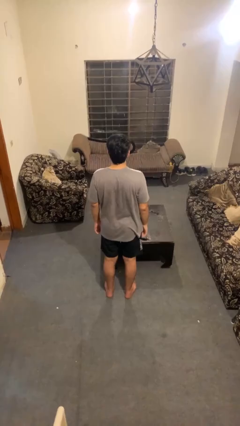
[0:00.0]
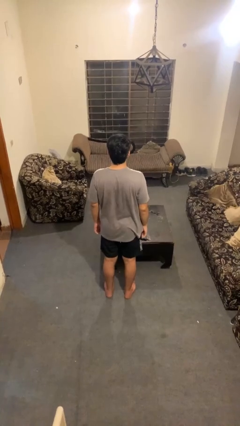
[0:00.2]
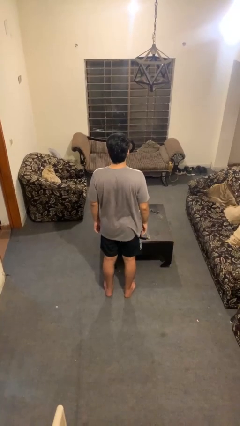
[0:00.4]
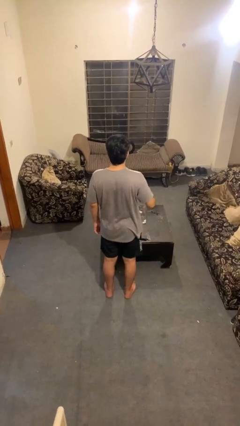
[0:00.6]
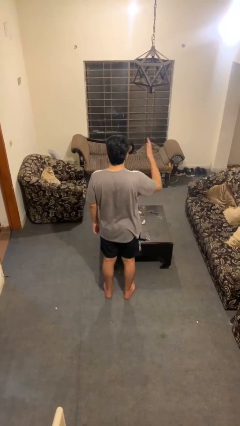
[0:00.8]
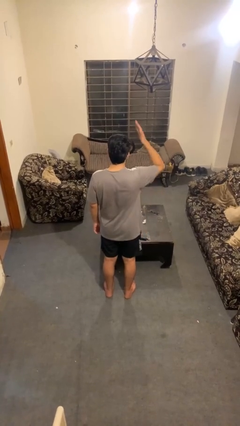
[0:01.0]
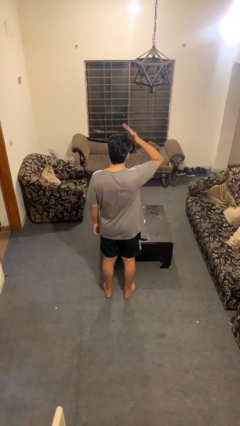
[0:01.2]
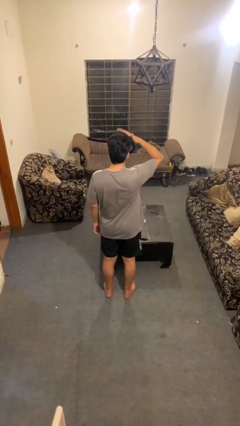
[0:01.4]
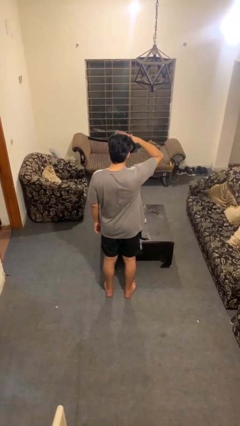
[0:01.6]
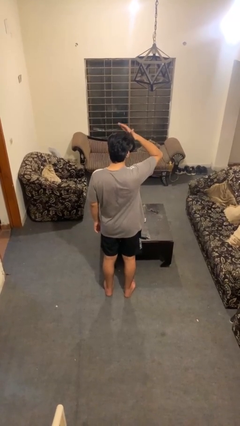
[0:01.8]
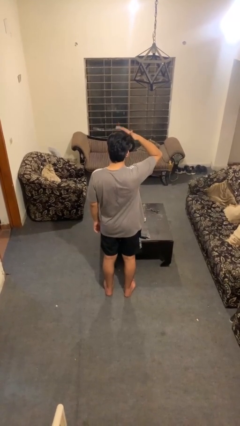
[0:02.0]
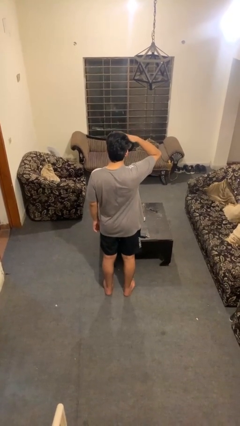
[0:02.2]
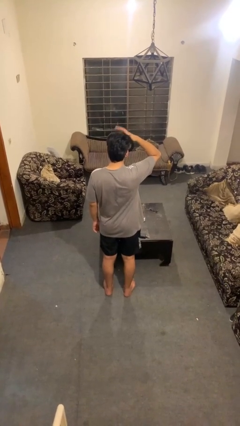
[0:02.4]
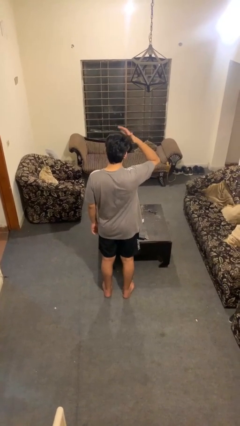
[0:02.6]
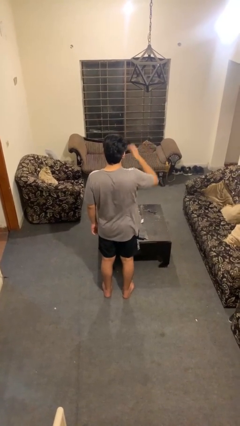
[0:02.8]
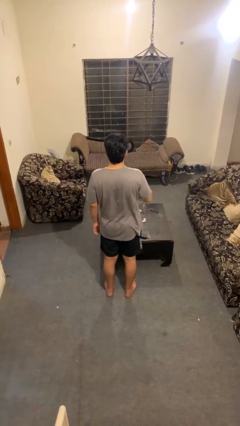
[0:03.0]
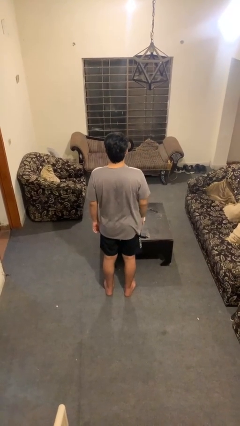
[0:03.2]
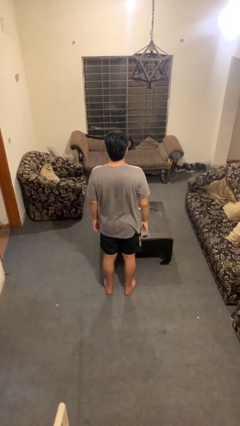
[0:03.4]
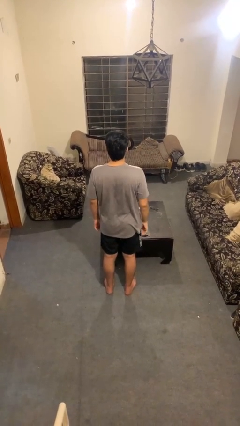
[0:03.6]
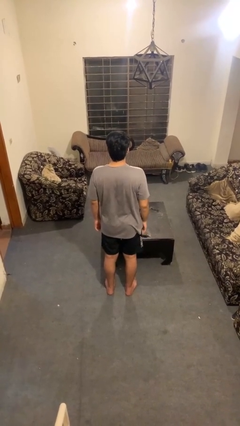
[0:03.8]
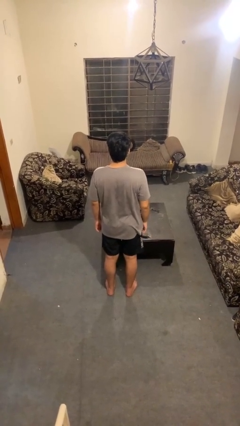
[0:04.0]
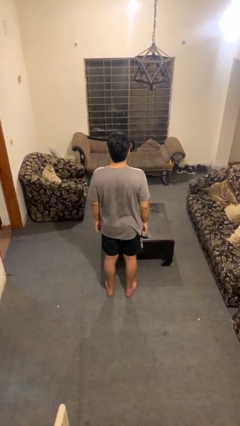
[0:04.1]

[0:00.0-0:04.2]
person pats head

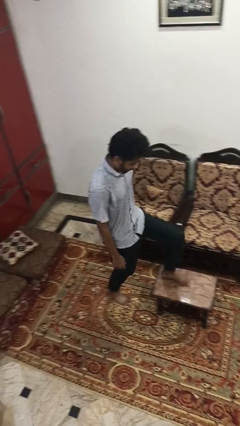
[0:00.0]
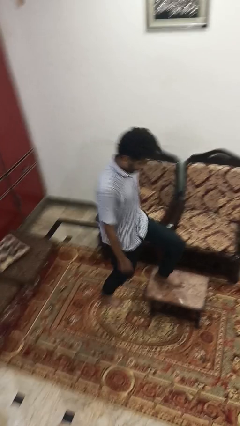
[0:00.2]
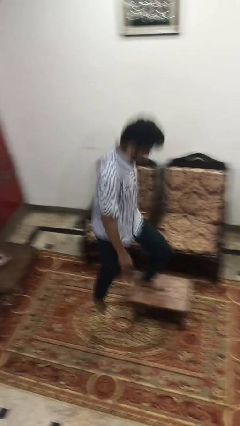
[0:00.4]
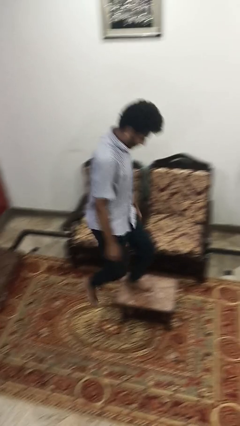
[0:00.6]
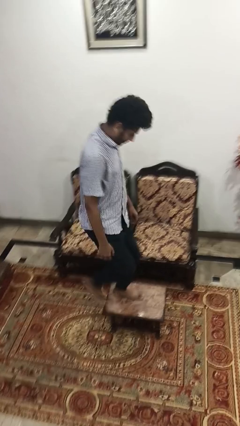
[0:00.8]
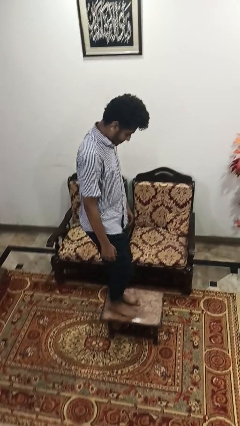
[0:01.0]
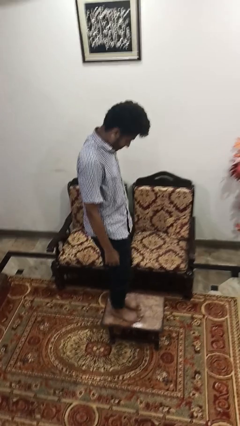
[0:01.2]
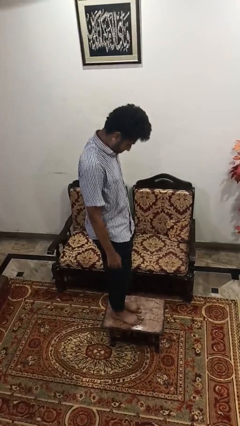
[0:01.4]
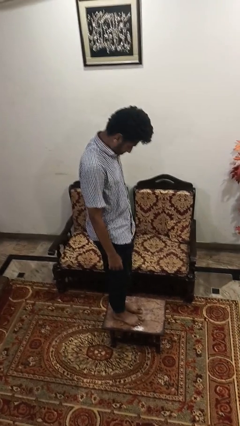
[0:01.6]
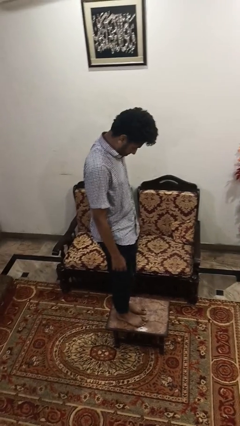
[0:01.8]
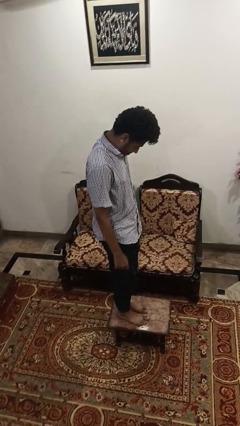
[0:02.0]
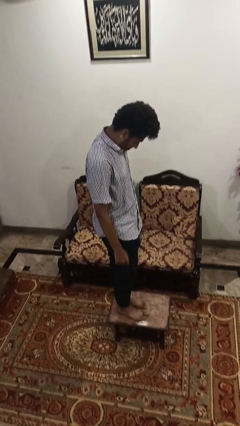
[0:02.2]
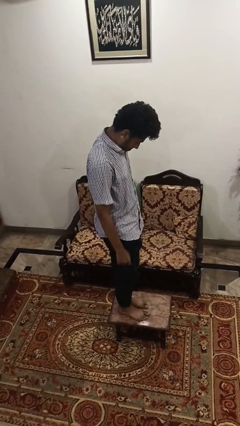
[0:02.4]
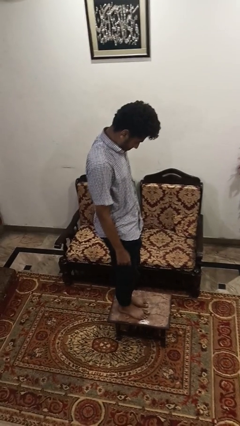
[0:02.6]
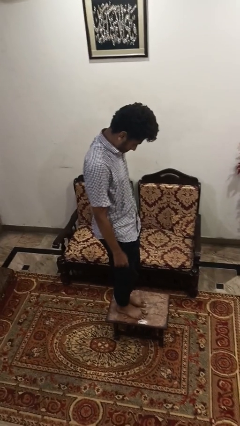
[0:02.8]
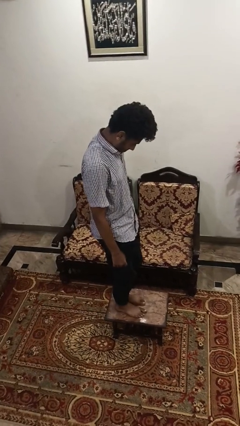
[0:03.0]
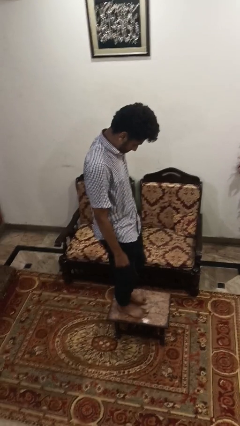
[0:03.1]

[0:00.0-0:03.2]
person climbs on table

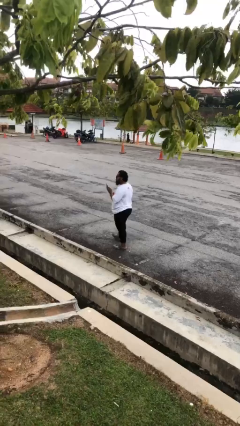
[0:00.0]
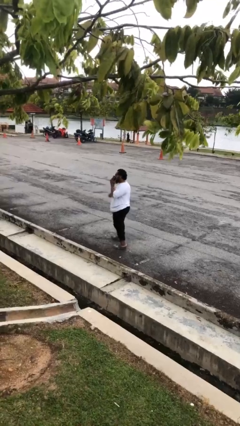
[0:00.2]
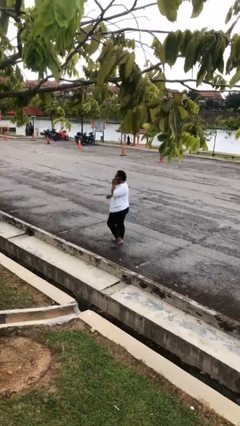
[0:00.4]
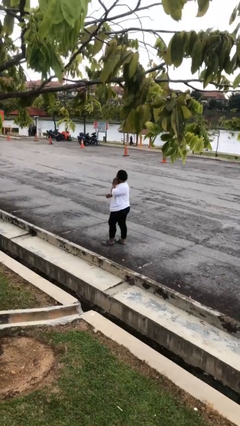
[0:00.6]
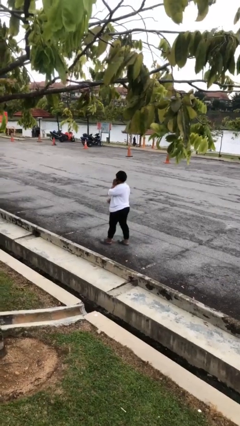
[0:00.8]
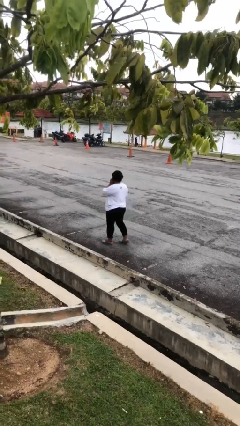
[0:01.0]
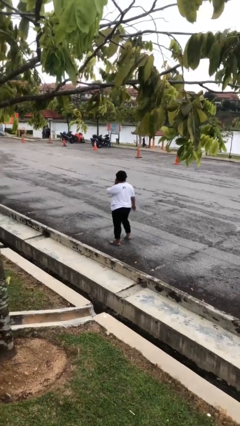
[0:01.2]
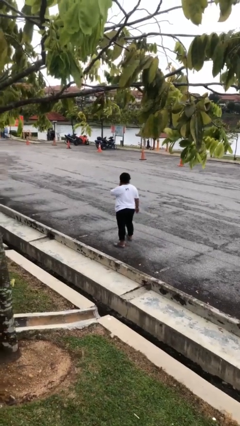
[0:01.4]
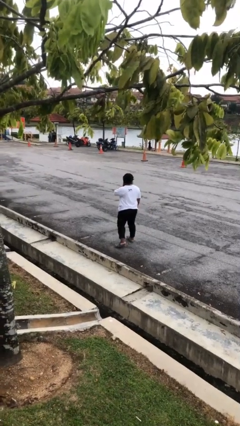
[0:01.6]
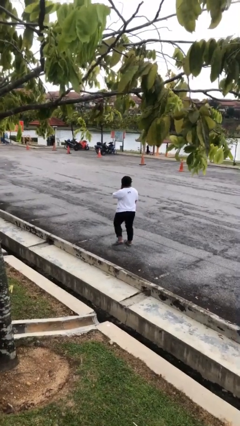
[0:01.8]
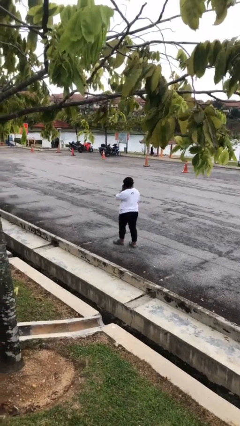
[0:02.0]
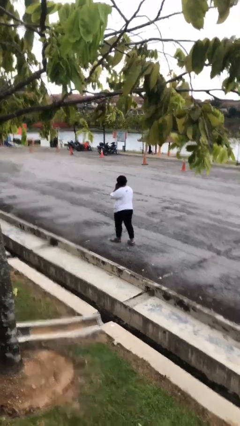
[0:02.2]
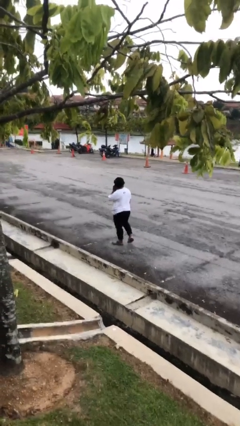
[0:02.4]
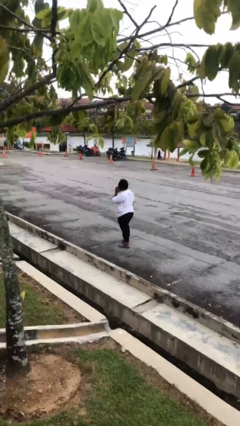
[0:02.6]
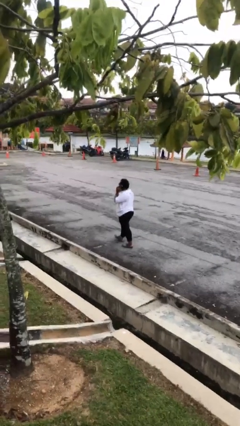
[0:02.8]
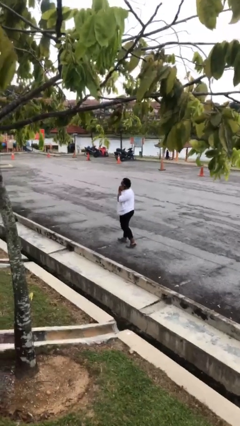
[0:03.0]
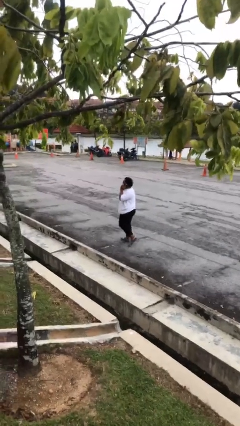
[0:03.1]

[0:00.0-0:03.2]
person talks on phone

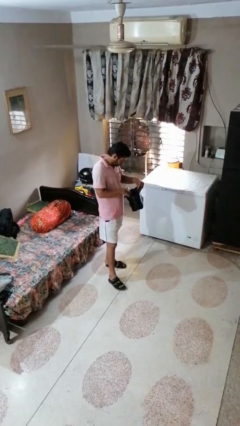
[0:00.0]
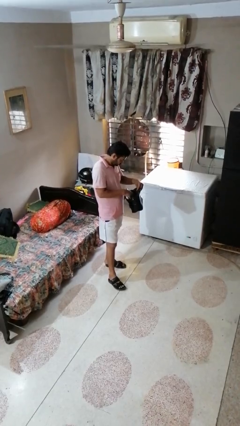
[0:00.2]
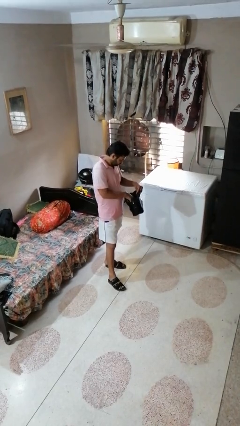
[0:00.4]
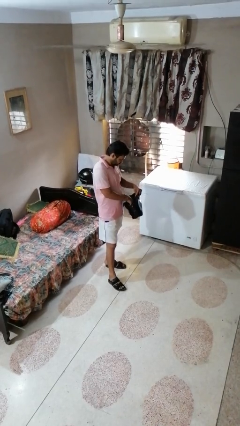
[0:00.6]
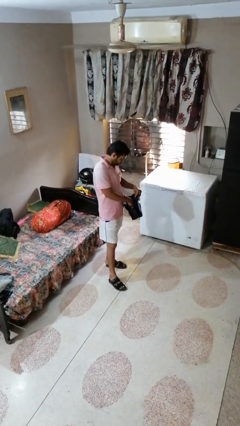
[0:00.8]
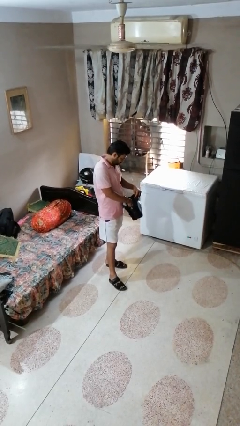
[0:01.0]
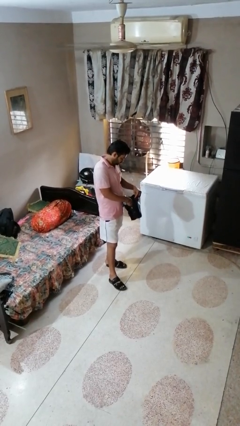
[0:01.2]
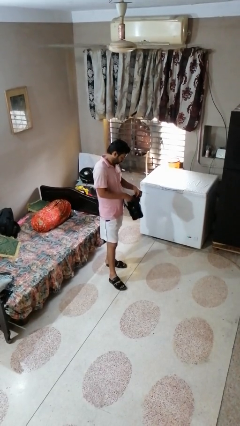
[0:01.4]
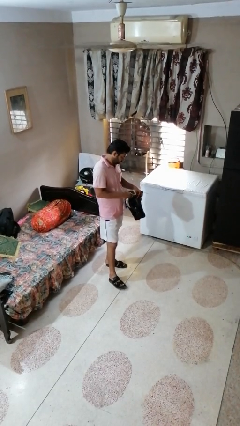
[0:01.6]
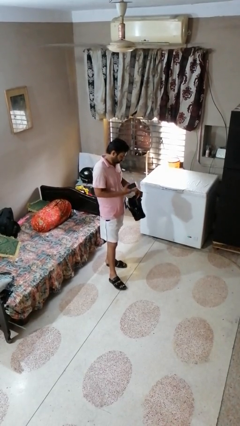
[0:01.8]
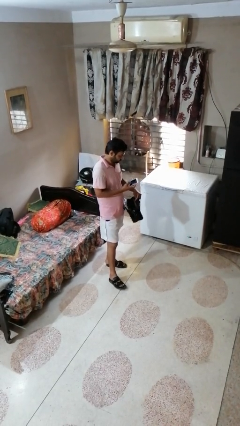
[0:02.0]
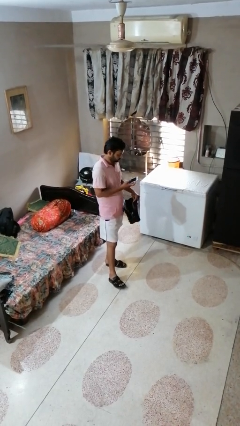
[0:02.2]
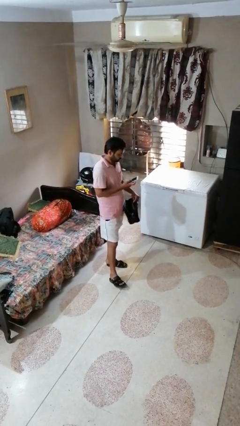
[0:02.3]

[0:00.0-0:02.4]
person takes object from purse

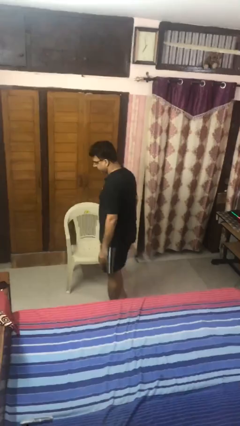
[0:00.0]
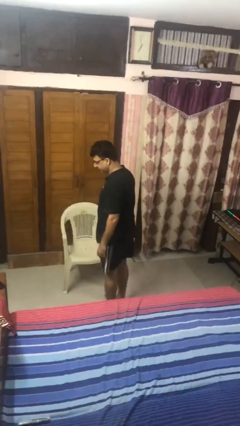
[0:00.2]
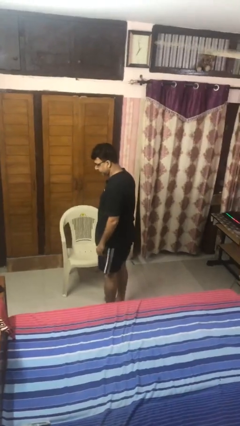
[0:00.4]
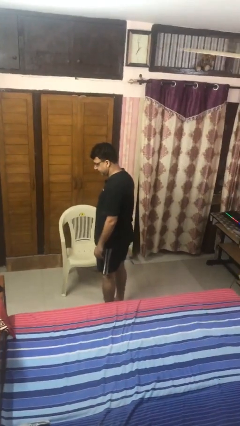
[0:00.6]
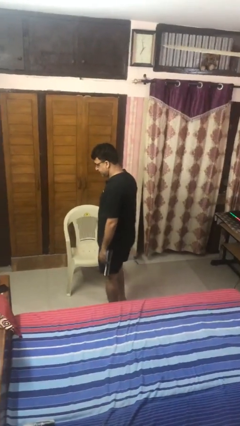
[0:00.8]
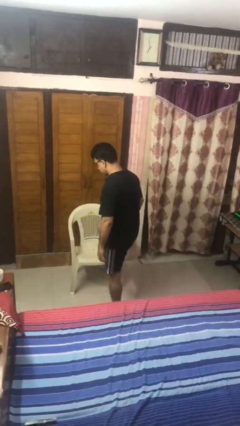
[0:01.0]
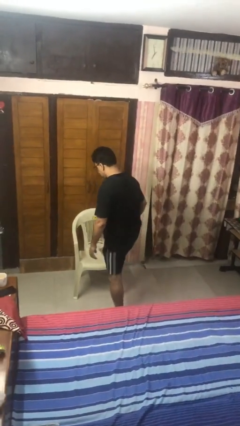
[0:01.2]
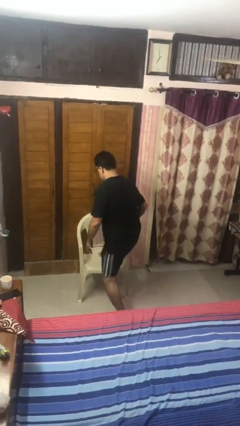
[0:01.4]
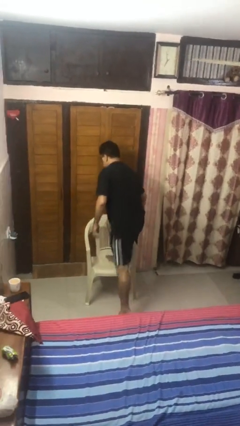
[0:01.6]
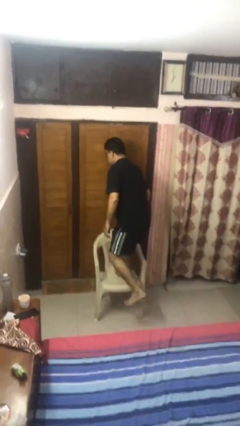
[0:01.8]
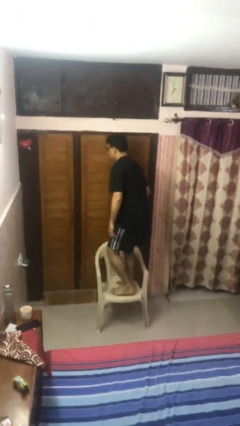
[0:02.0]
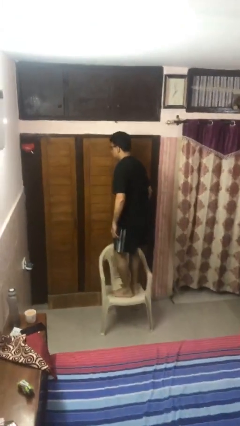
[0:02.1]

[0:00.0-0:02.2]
person climbs on chair

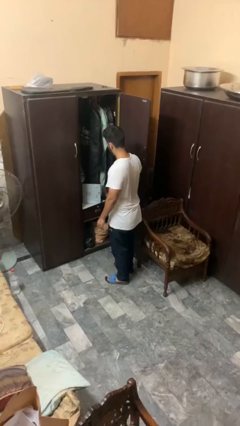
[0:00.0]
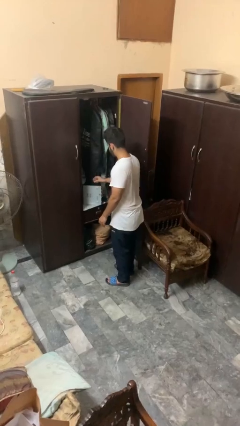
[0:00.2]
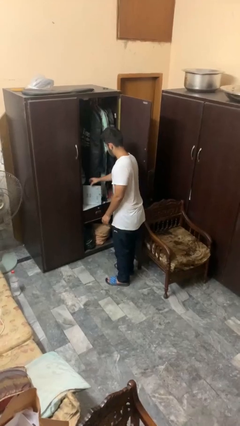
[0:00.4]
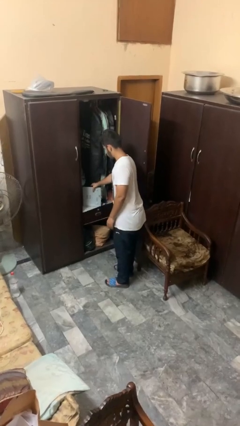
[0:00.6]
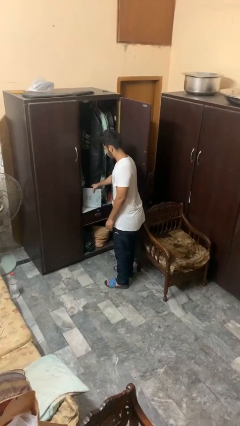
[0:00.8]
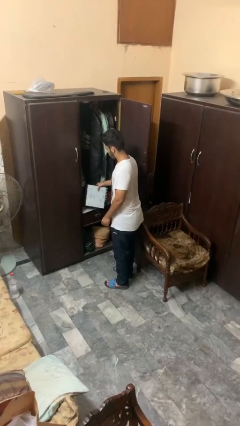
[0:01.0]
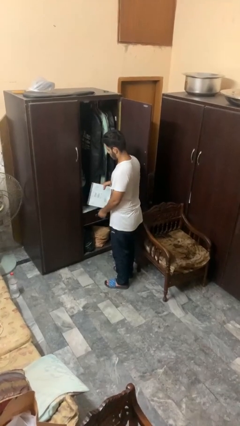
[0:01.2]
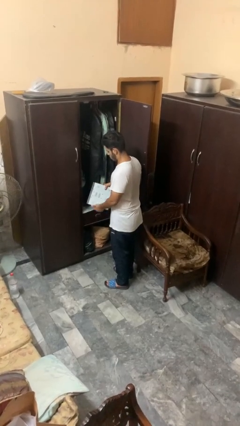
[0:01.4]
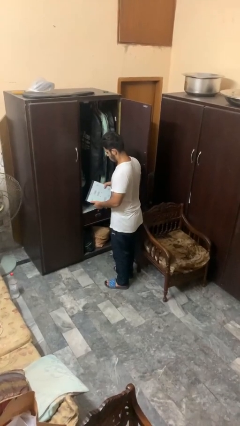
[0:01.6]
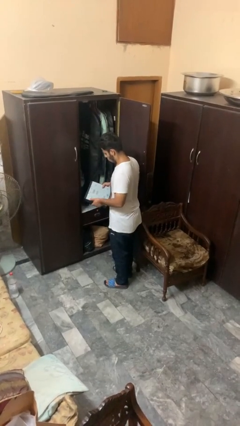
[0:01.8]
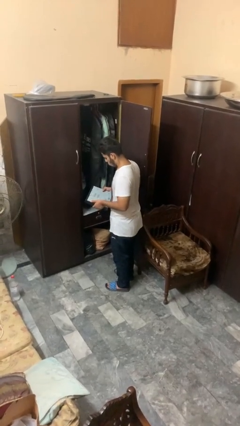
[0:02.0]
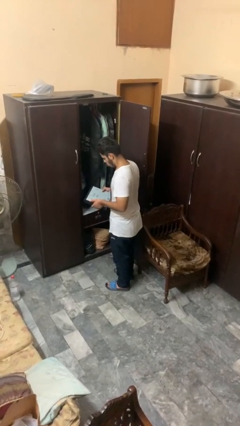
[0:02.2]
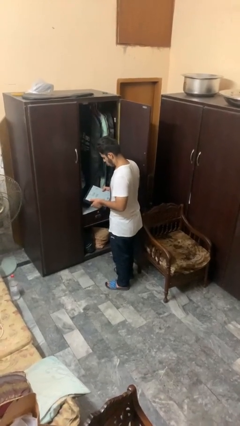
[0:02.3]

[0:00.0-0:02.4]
person picks up object from cabinet
